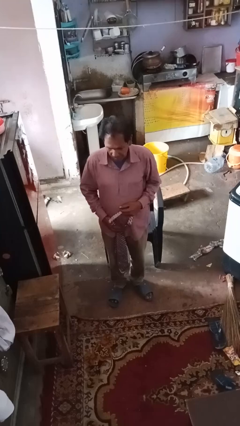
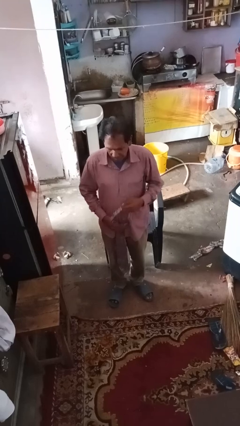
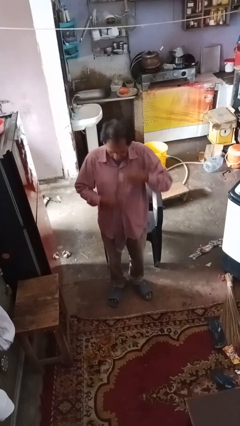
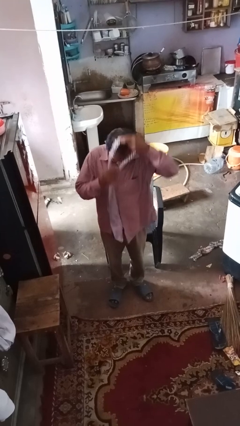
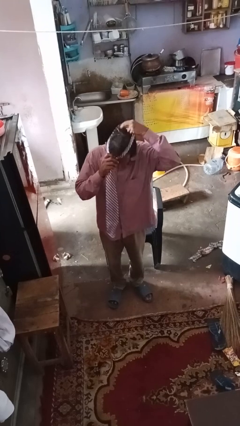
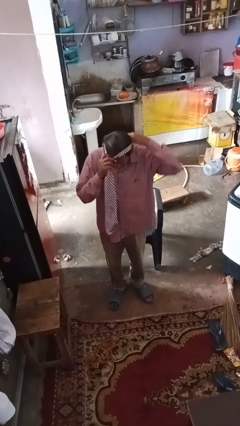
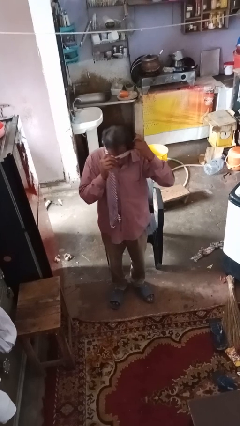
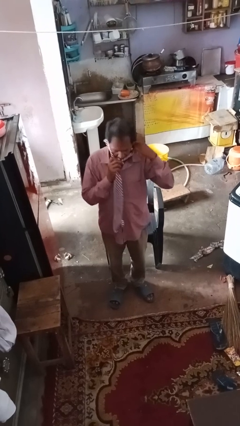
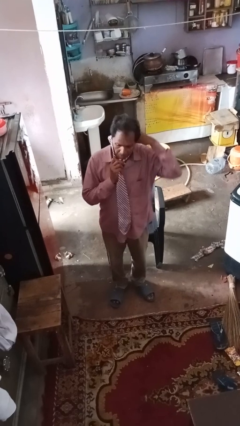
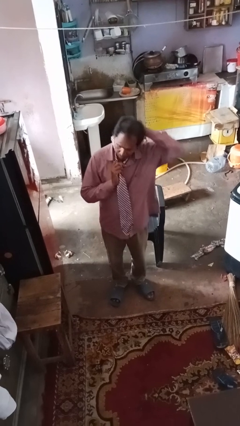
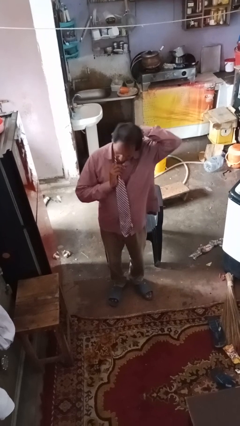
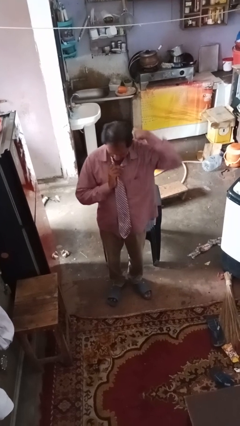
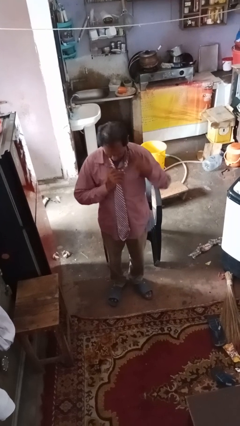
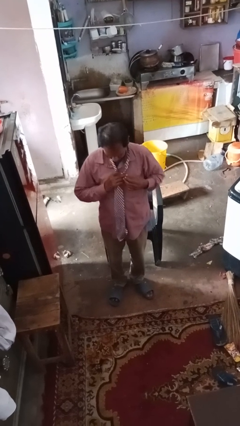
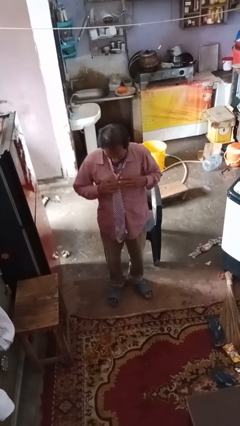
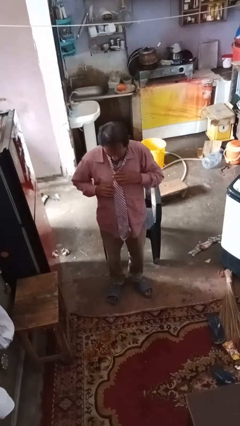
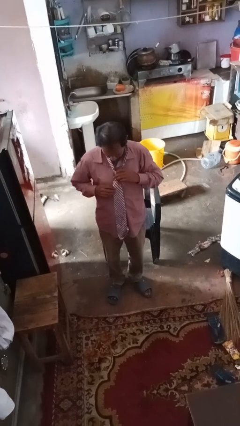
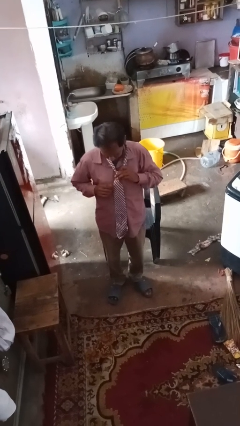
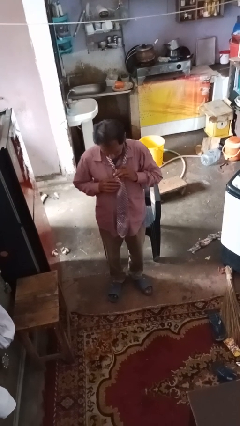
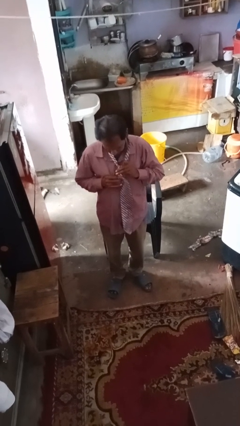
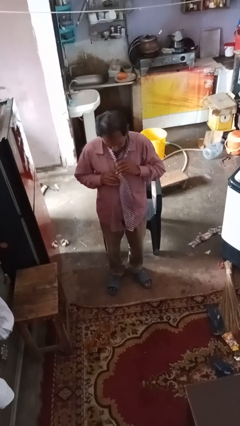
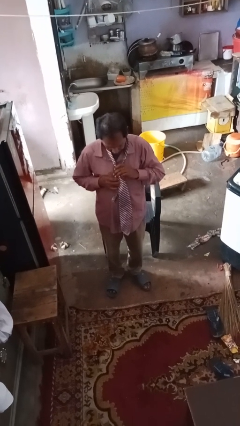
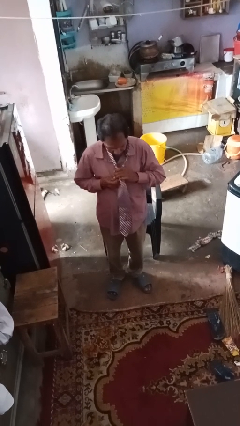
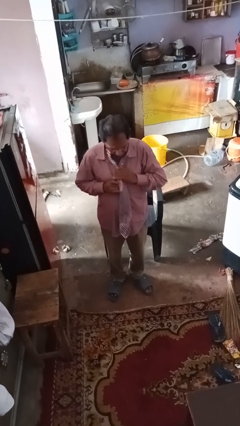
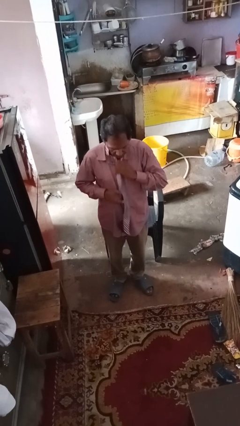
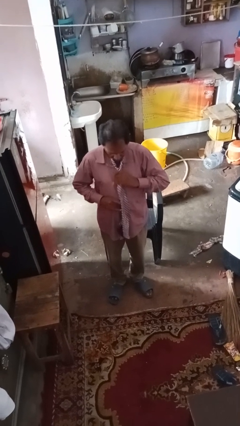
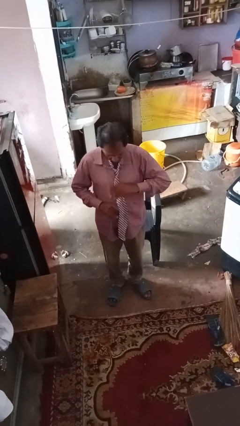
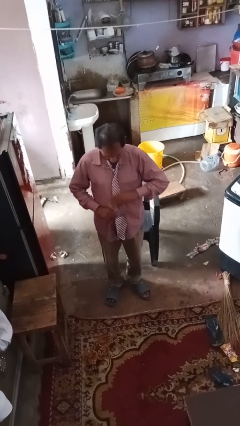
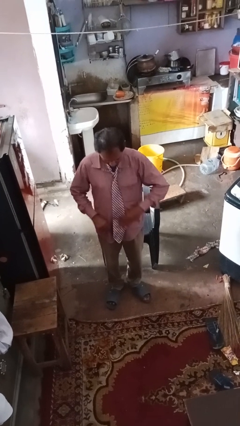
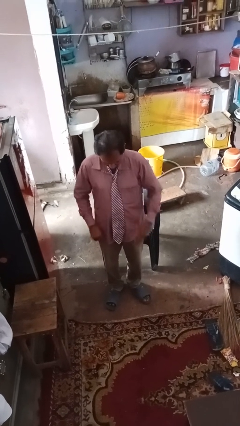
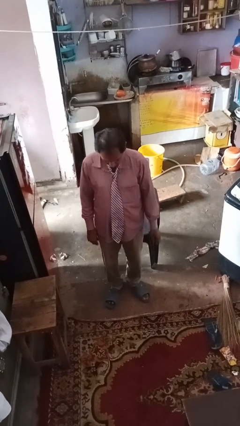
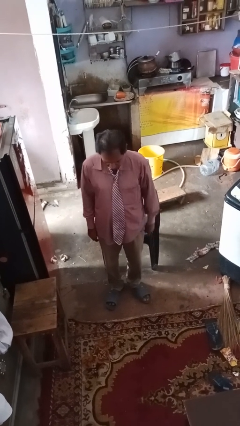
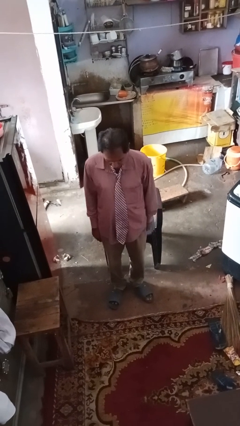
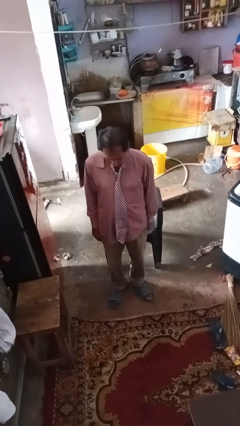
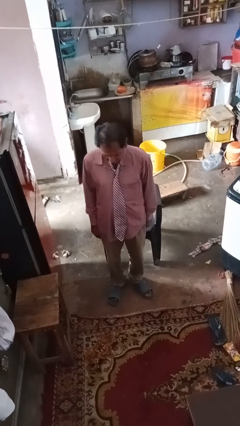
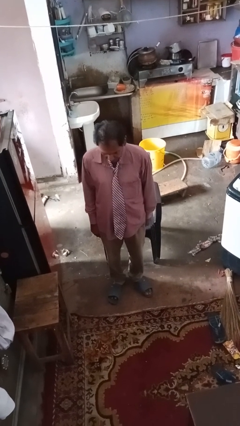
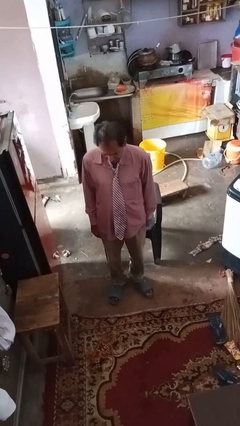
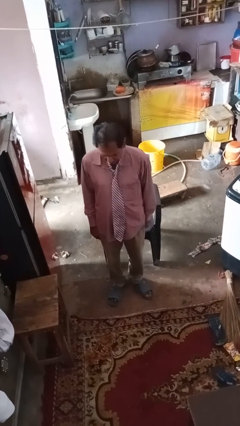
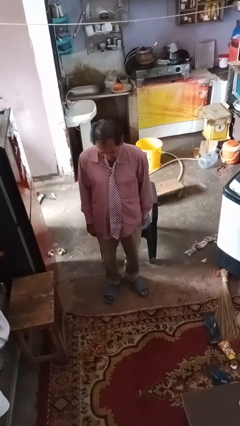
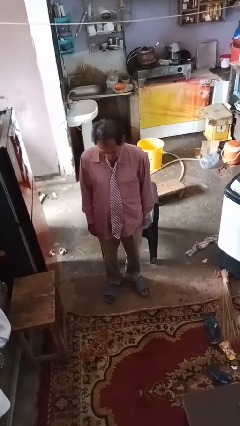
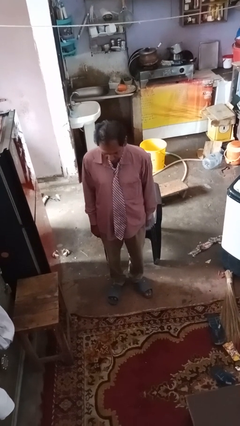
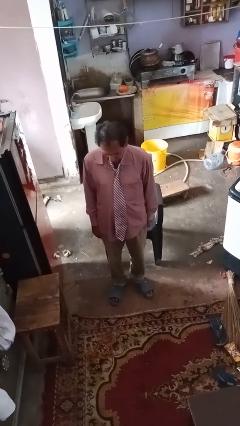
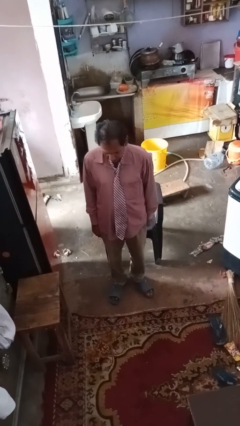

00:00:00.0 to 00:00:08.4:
person puts on necktie

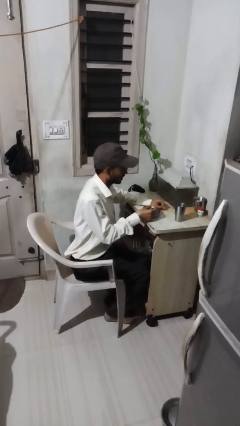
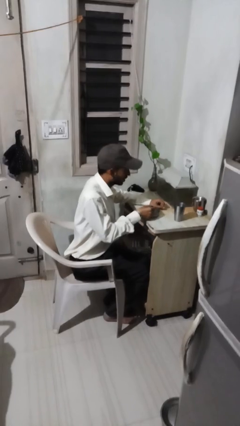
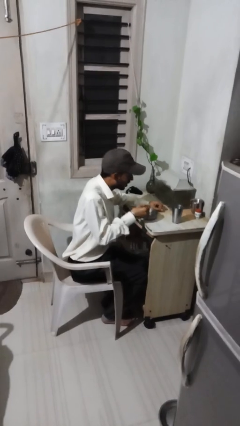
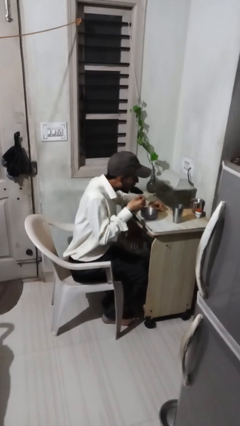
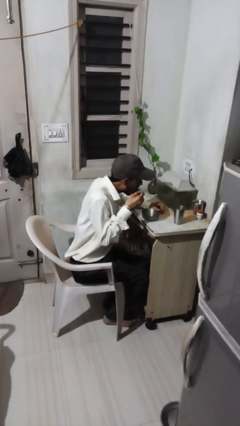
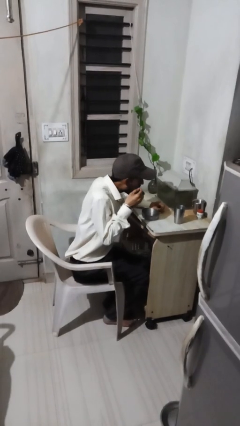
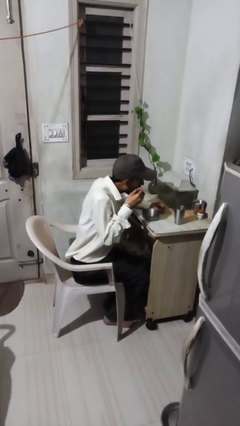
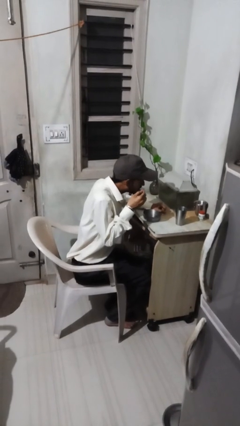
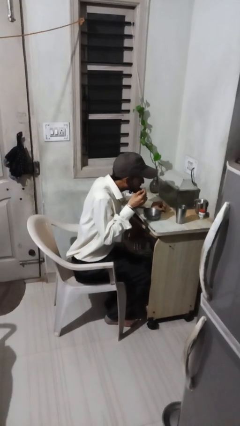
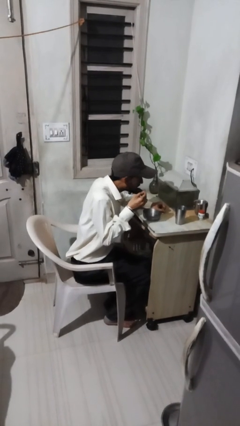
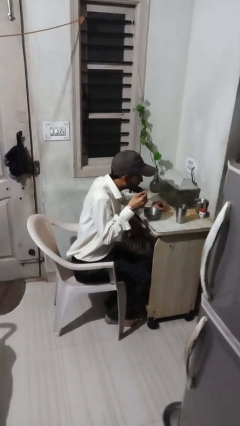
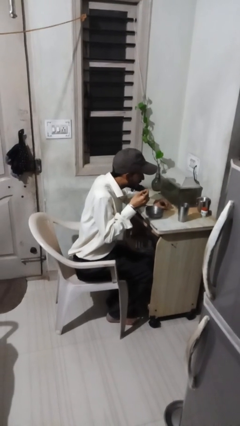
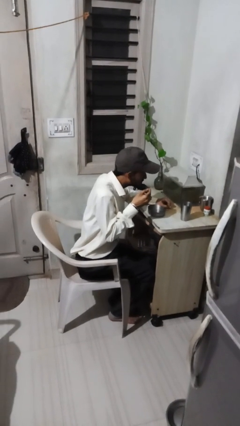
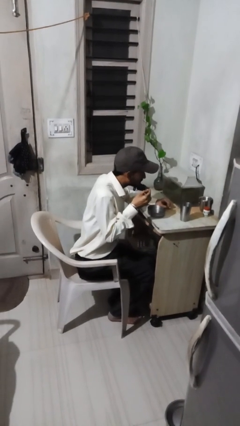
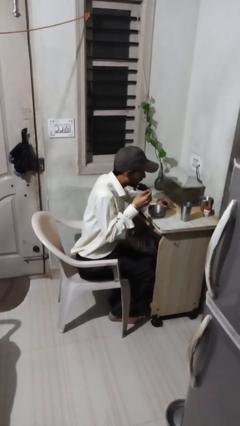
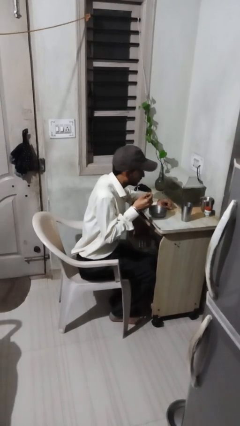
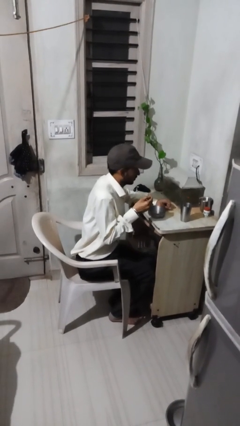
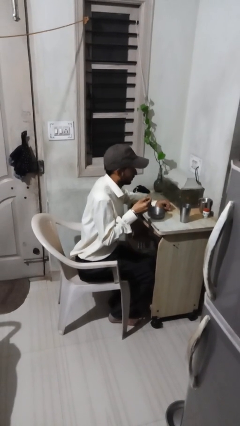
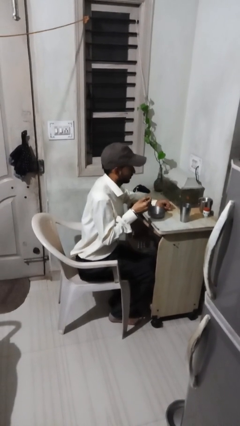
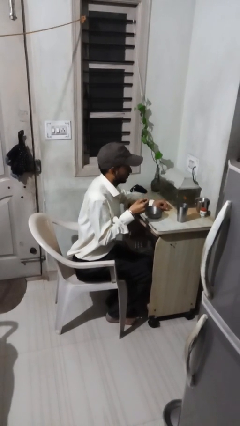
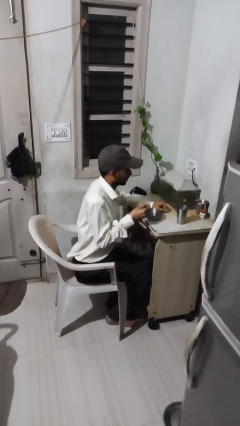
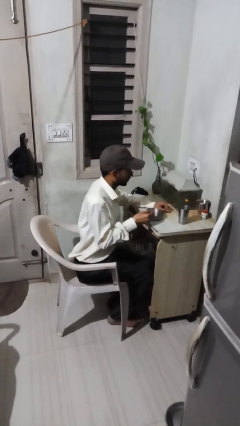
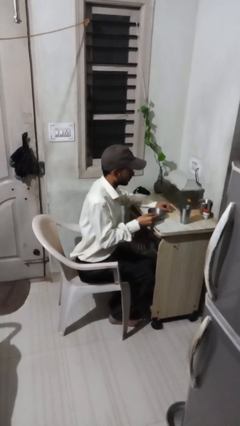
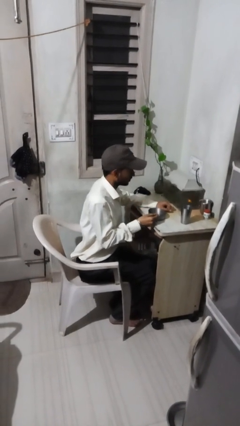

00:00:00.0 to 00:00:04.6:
person eats with utensil

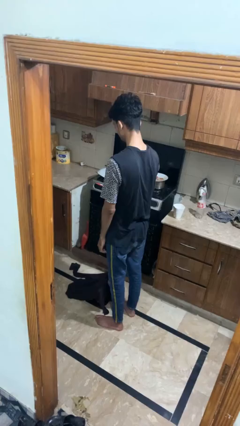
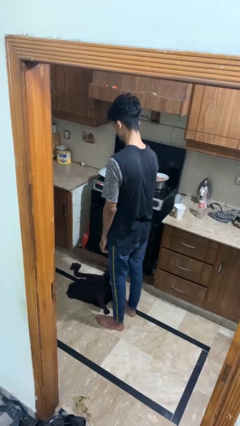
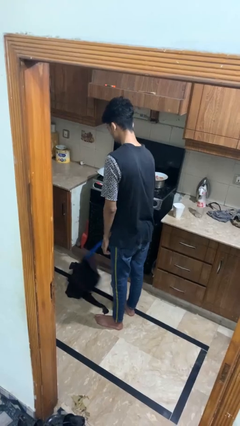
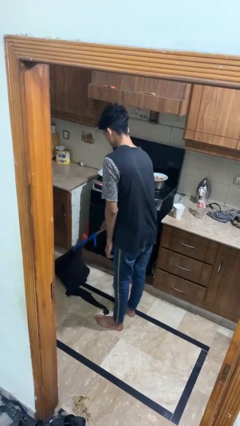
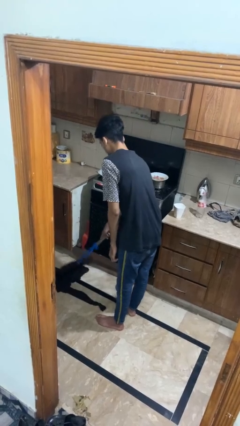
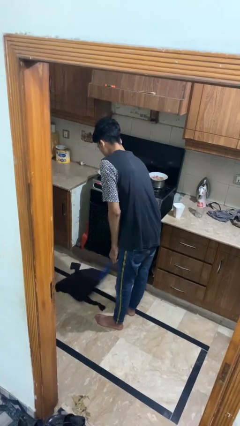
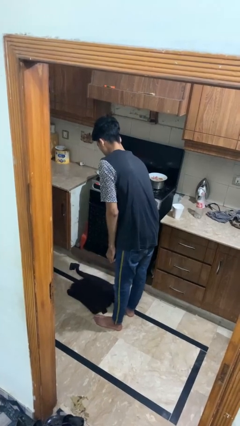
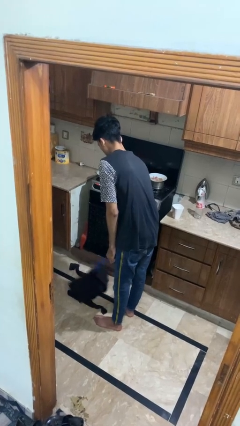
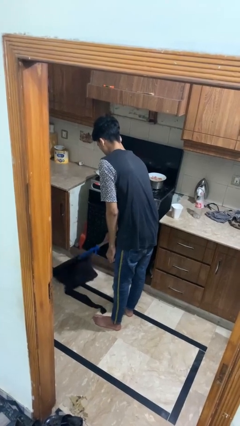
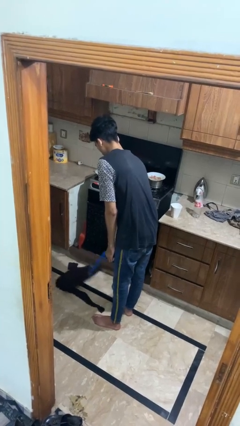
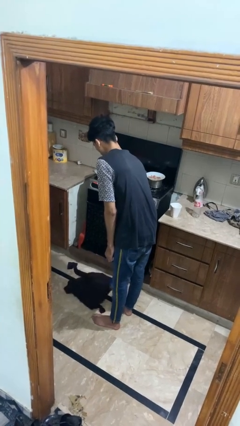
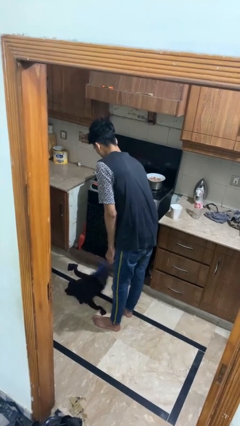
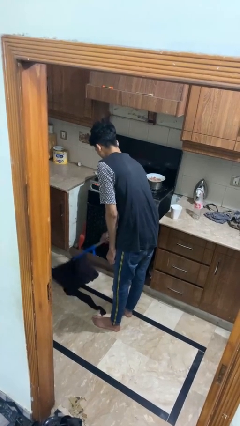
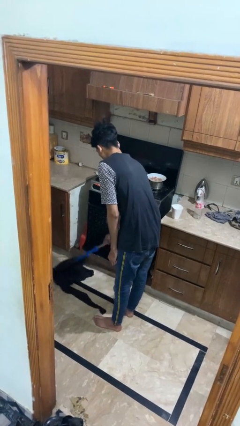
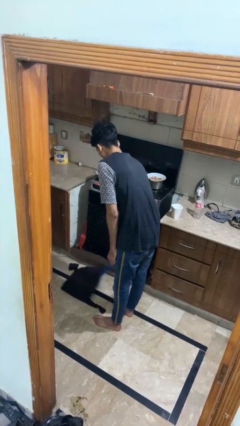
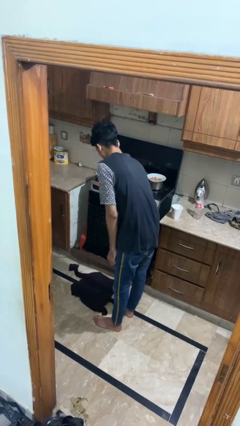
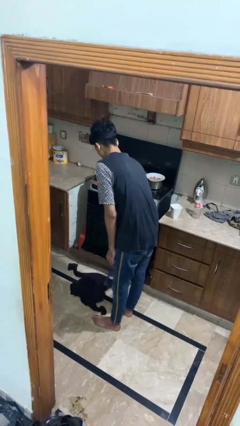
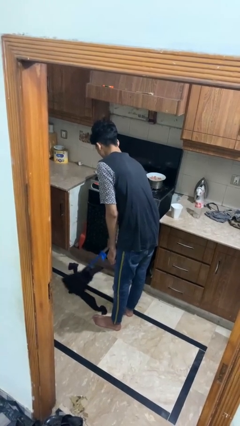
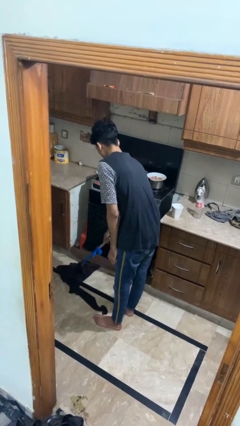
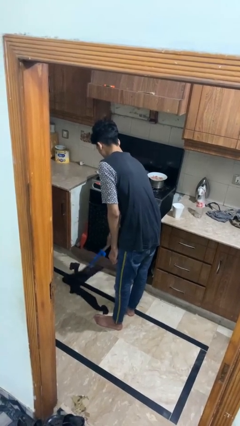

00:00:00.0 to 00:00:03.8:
person mops

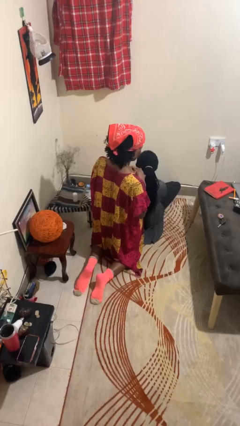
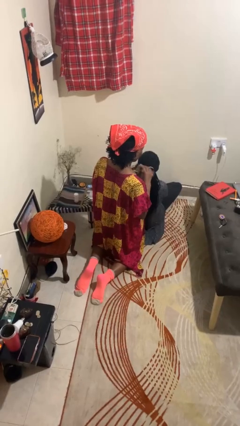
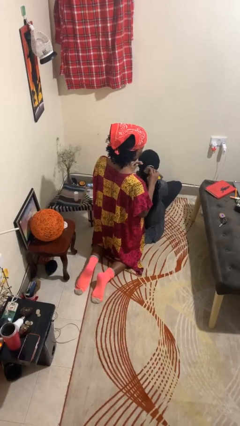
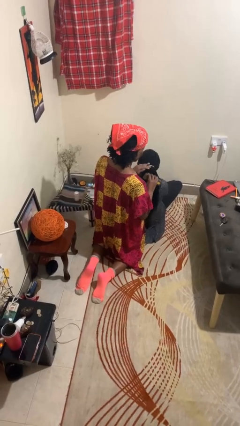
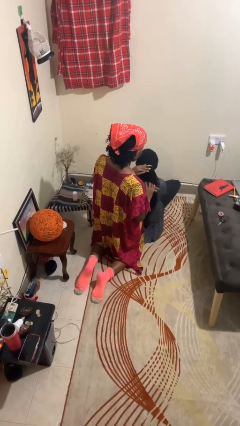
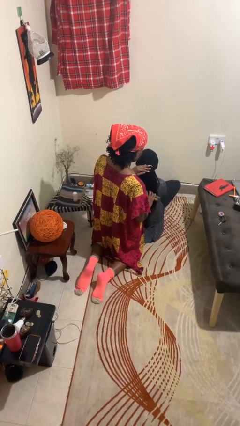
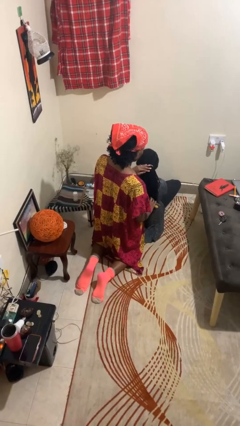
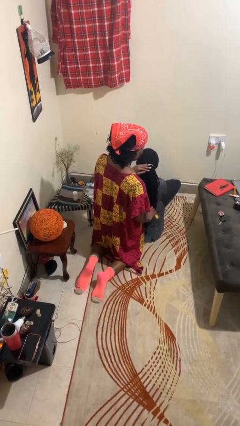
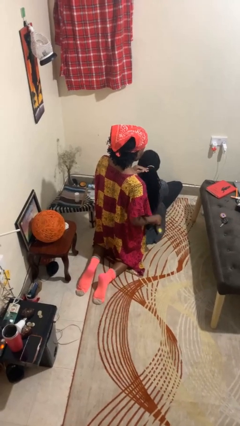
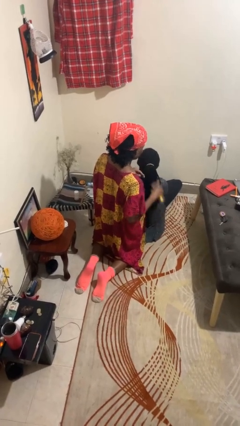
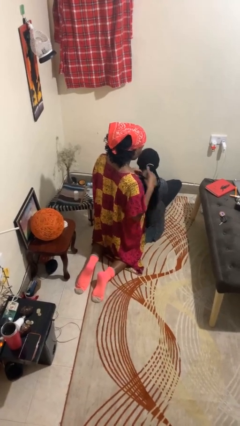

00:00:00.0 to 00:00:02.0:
person brushes hair of person
